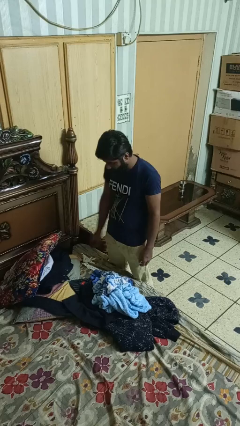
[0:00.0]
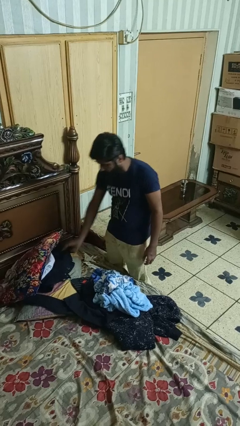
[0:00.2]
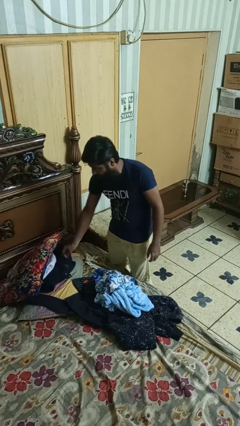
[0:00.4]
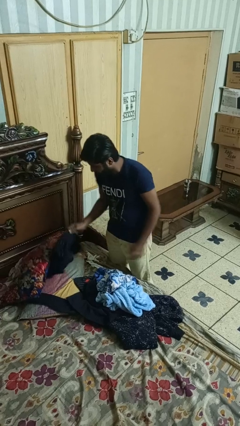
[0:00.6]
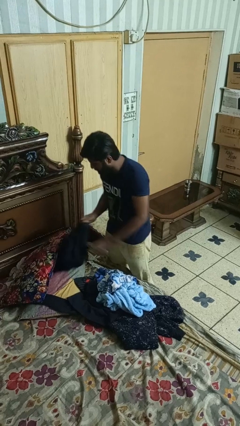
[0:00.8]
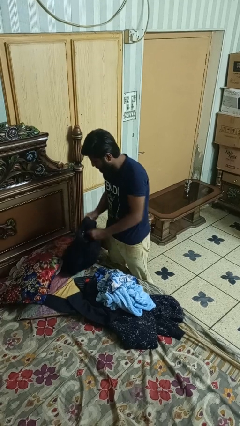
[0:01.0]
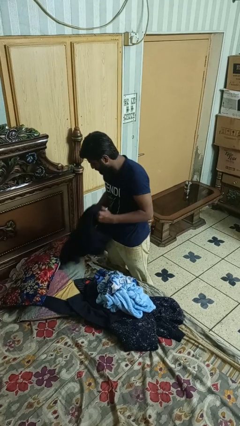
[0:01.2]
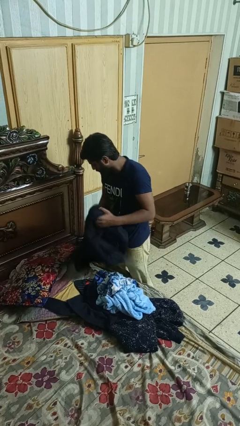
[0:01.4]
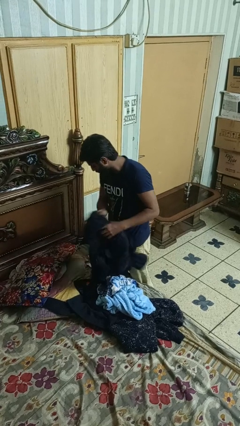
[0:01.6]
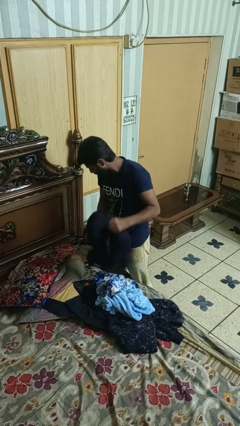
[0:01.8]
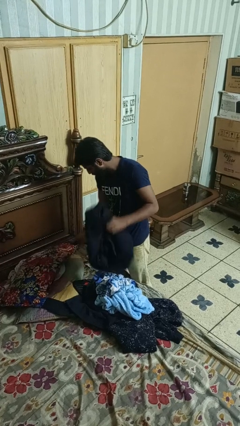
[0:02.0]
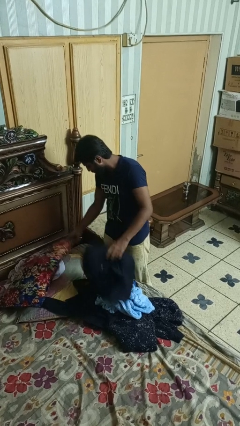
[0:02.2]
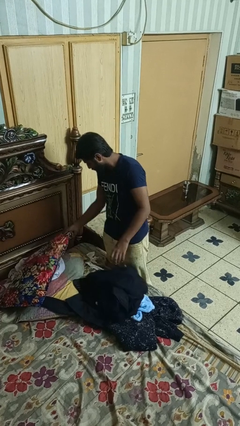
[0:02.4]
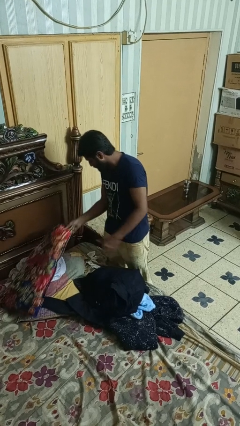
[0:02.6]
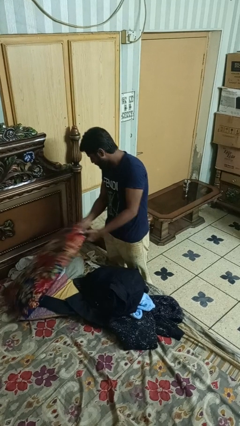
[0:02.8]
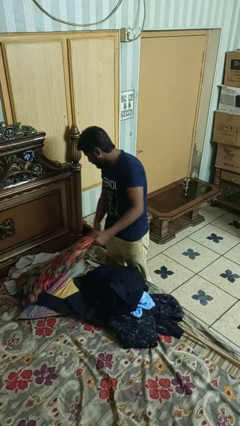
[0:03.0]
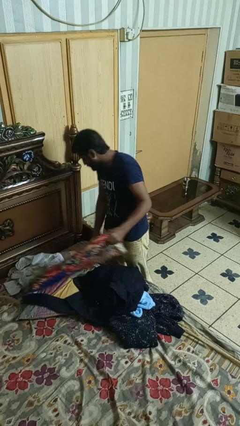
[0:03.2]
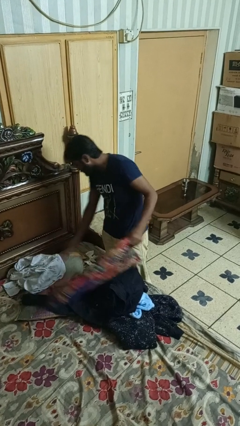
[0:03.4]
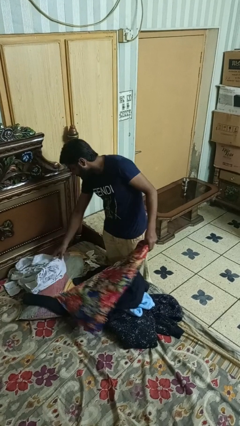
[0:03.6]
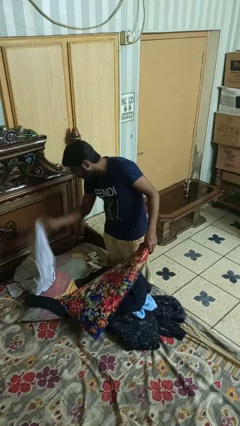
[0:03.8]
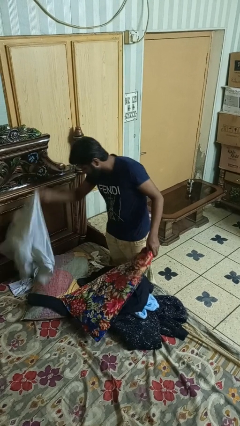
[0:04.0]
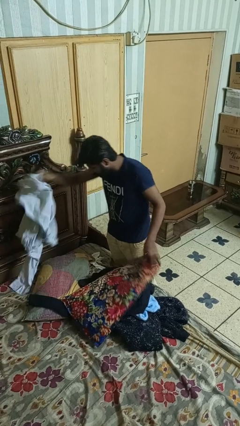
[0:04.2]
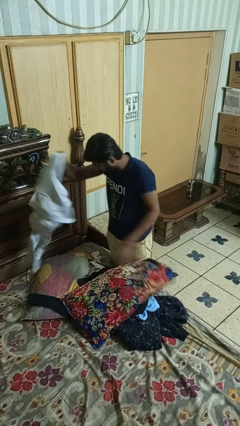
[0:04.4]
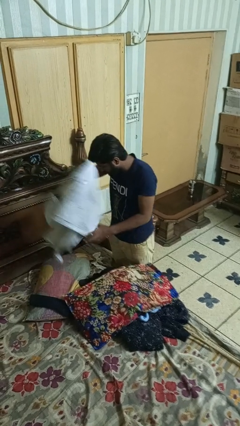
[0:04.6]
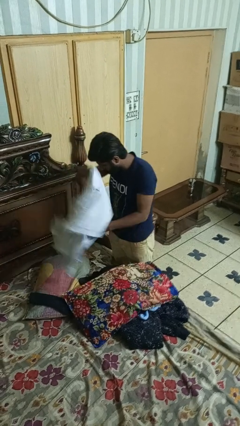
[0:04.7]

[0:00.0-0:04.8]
person searches under bed

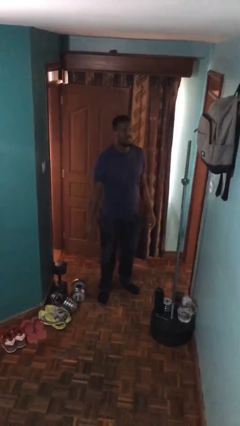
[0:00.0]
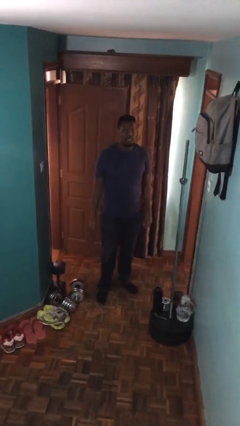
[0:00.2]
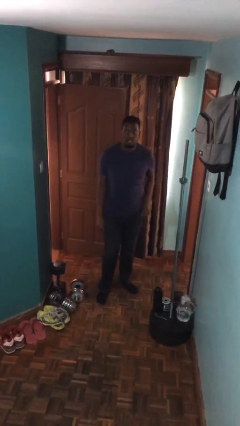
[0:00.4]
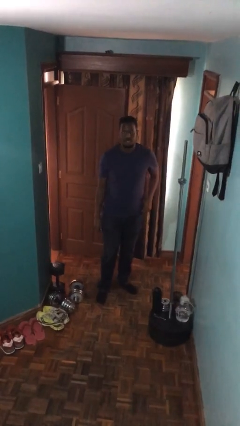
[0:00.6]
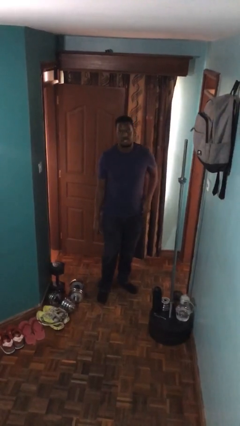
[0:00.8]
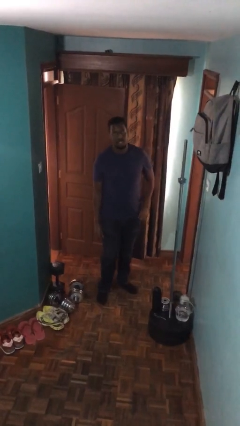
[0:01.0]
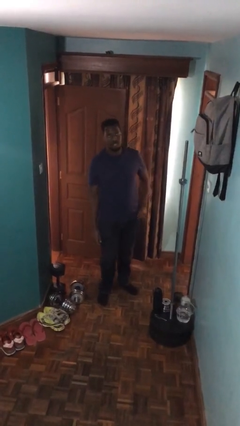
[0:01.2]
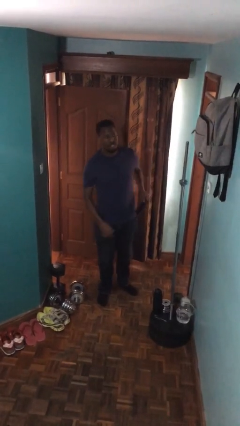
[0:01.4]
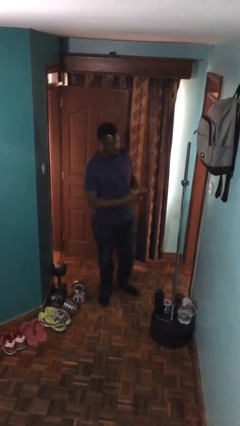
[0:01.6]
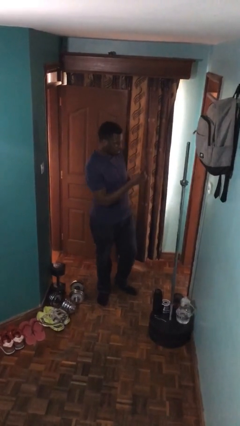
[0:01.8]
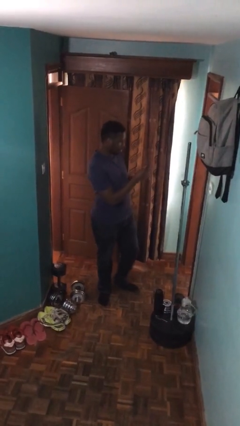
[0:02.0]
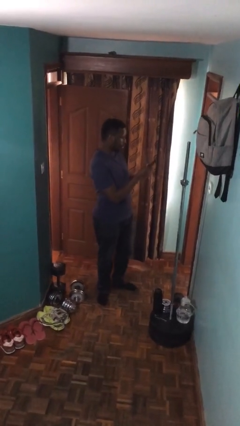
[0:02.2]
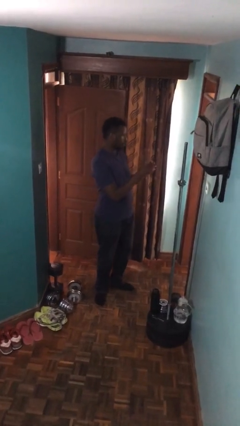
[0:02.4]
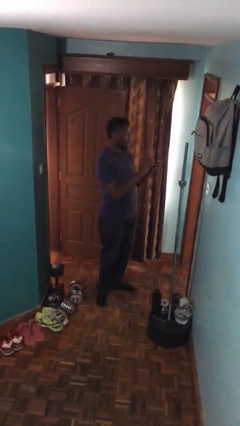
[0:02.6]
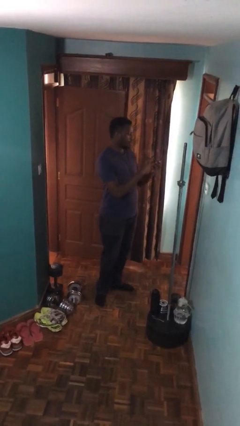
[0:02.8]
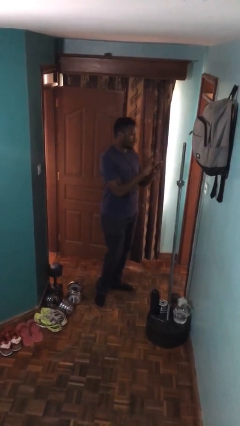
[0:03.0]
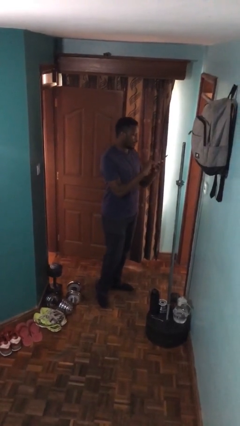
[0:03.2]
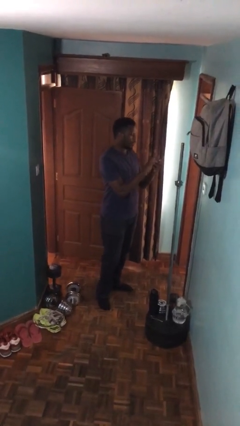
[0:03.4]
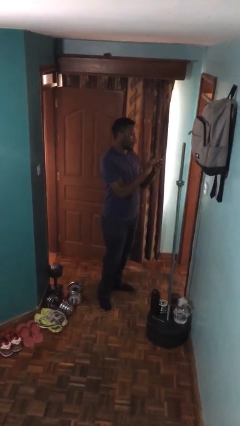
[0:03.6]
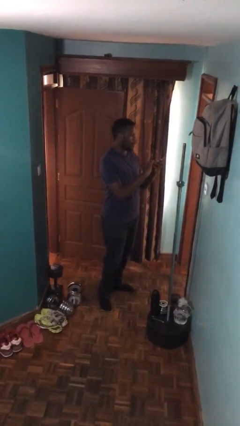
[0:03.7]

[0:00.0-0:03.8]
person takes phone from pocket

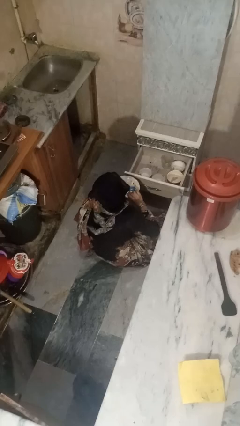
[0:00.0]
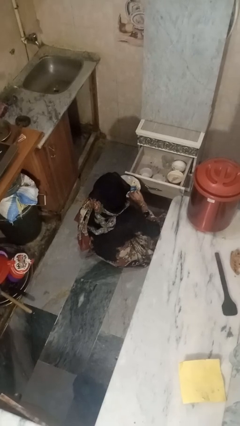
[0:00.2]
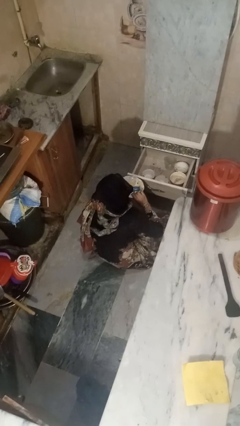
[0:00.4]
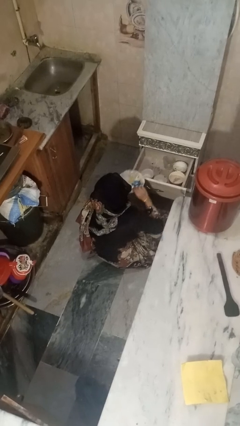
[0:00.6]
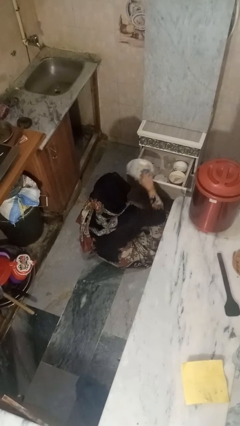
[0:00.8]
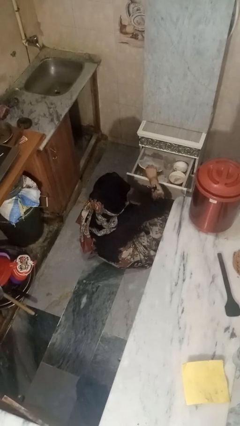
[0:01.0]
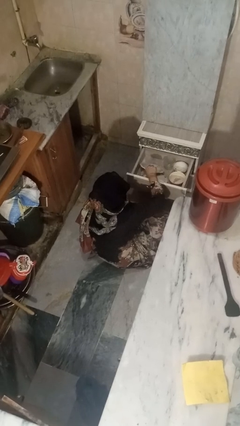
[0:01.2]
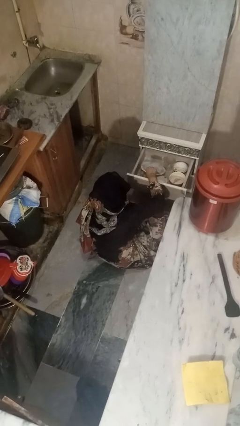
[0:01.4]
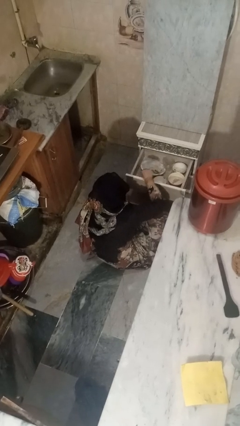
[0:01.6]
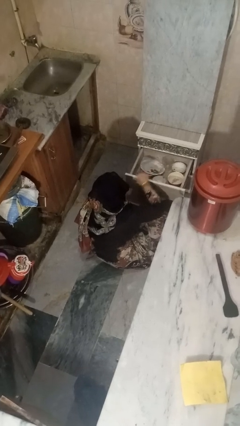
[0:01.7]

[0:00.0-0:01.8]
person puts object into kitchen drawer

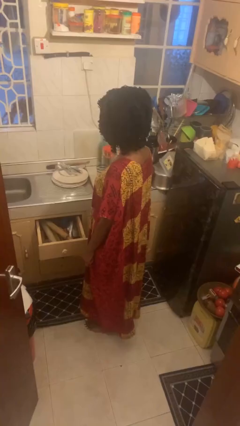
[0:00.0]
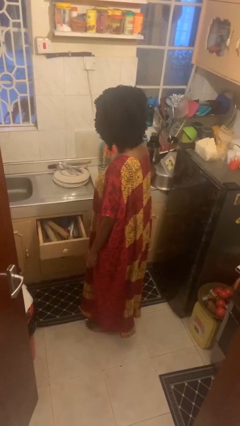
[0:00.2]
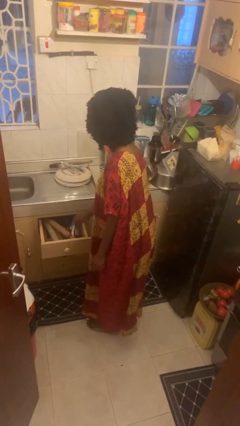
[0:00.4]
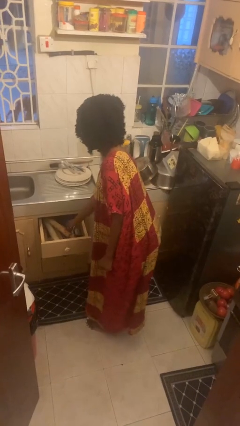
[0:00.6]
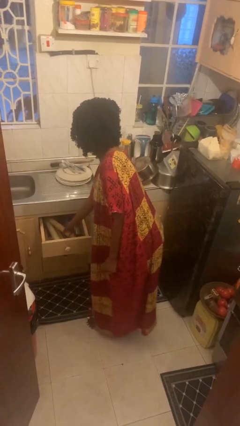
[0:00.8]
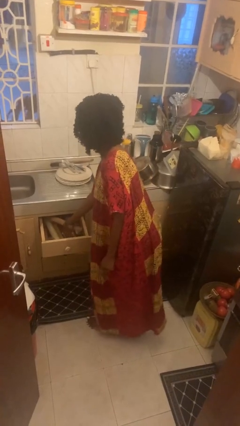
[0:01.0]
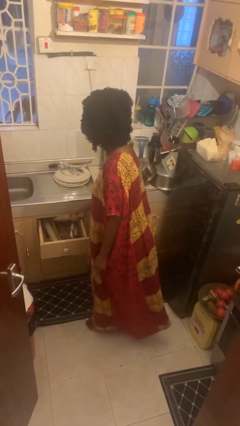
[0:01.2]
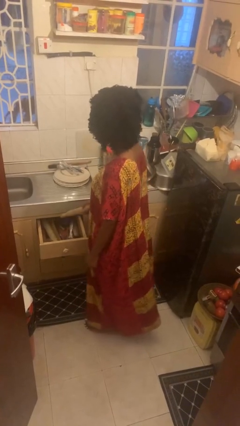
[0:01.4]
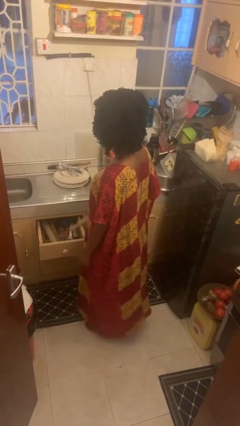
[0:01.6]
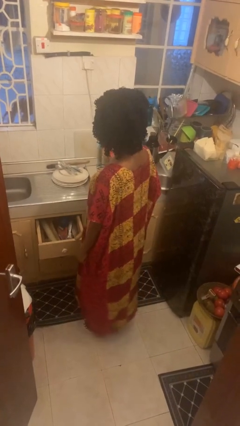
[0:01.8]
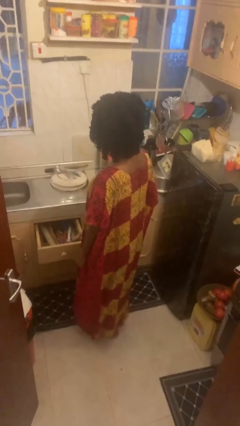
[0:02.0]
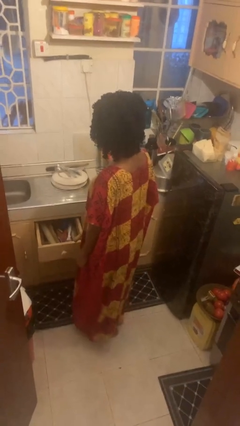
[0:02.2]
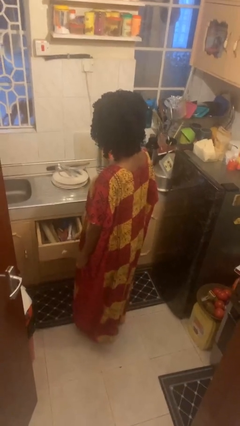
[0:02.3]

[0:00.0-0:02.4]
person takes object from kitchen drawer

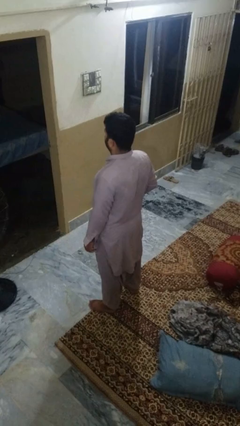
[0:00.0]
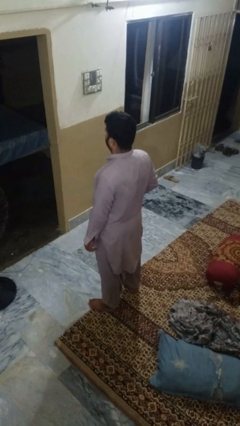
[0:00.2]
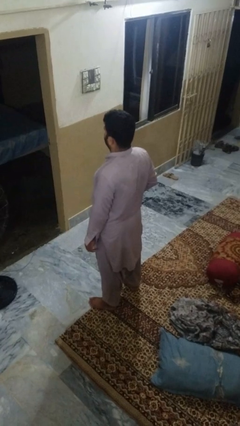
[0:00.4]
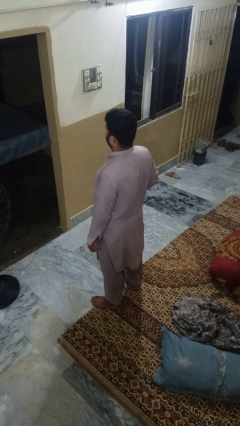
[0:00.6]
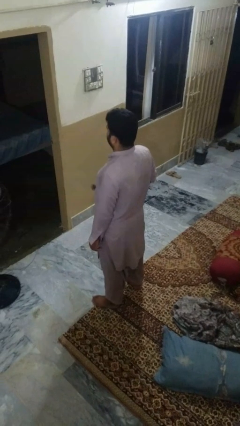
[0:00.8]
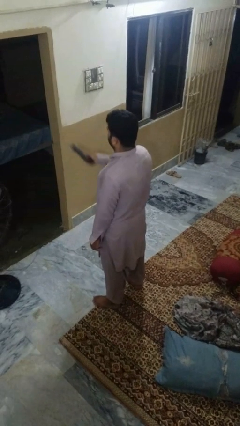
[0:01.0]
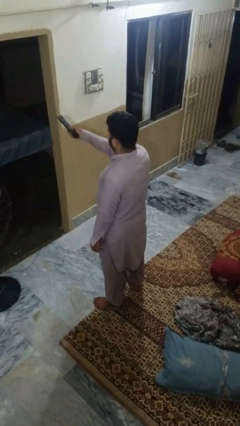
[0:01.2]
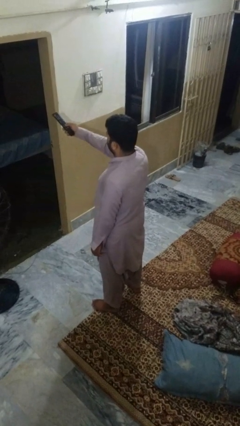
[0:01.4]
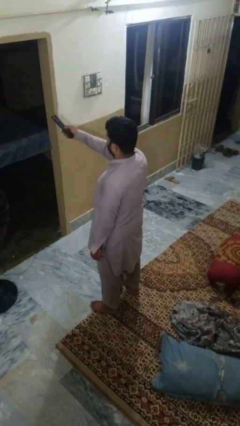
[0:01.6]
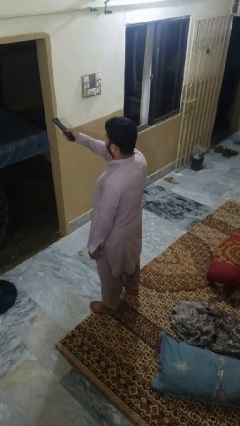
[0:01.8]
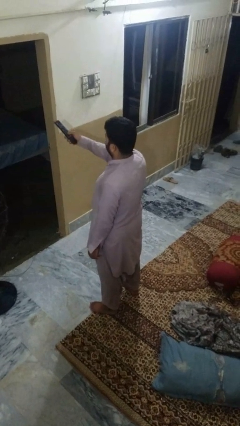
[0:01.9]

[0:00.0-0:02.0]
person uses television remote

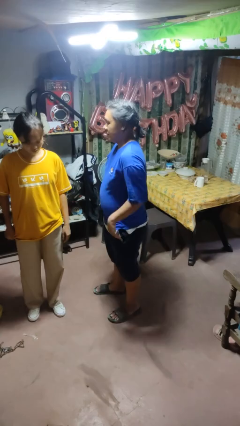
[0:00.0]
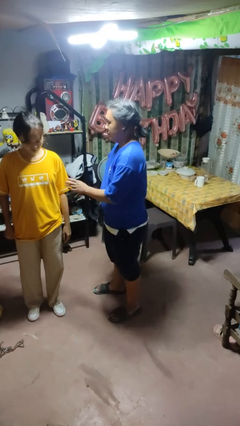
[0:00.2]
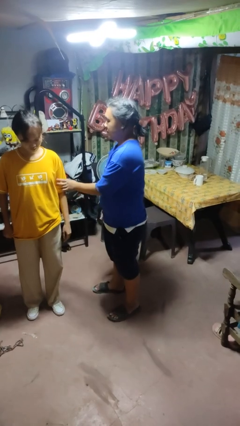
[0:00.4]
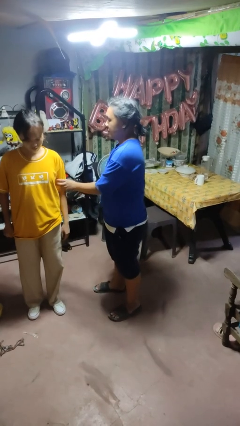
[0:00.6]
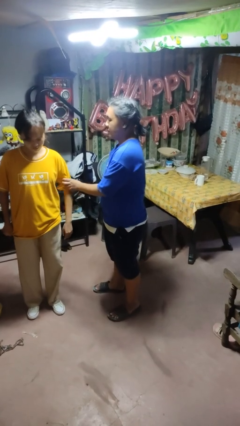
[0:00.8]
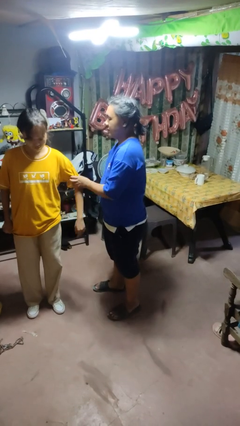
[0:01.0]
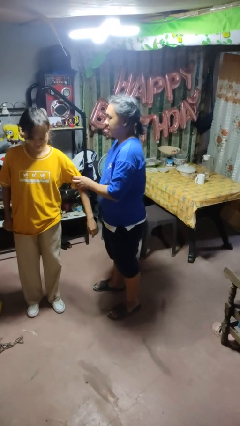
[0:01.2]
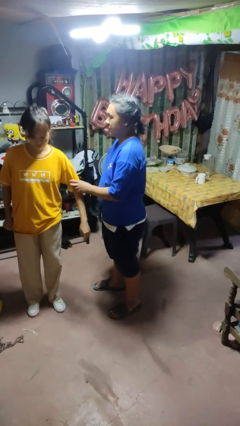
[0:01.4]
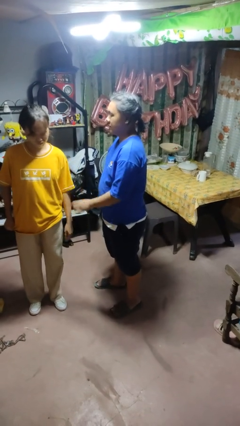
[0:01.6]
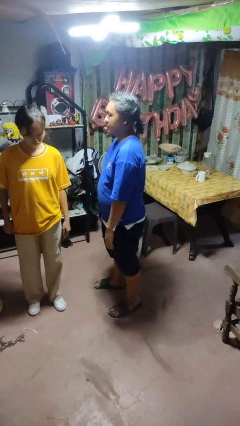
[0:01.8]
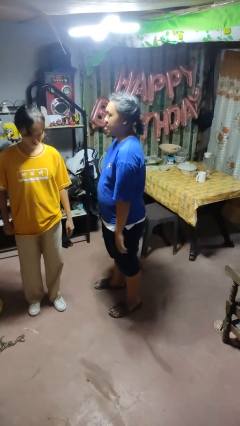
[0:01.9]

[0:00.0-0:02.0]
person grabs person by bicep

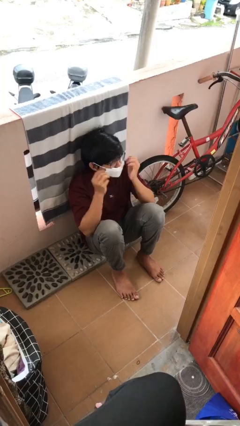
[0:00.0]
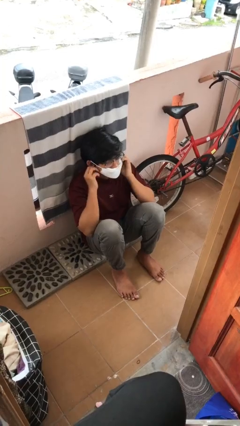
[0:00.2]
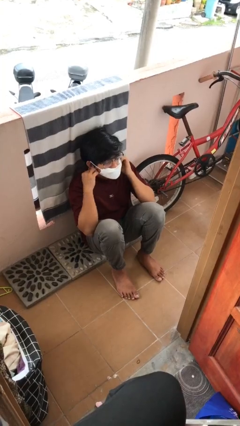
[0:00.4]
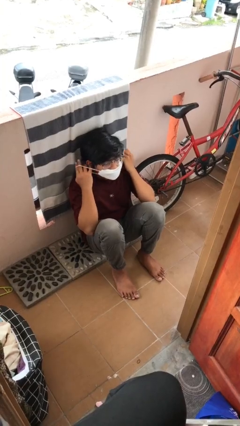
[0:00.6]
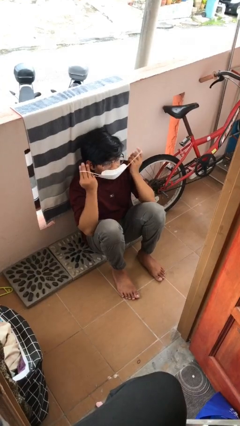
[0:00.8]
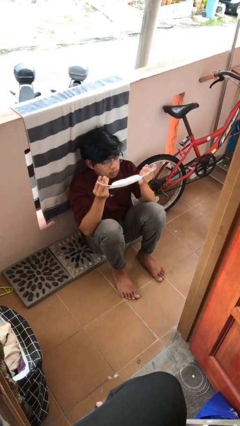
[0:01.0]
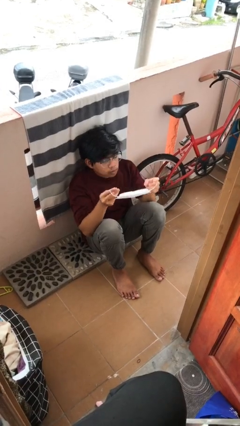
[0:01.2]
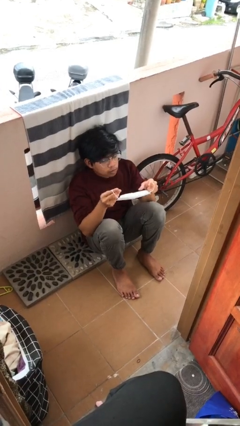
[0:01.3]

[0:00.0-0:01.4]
person takes off facemask
